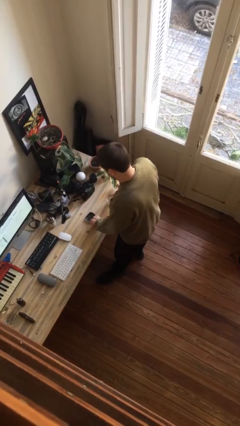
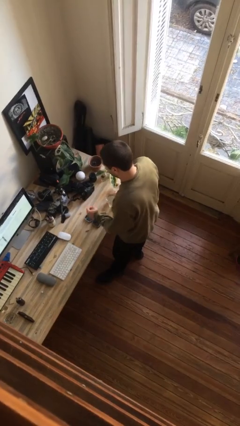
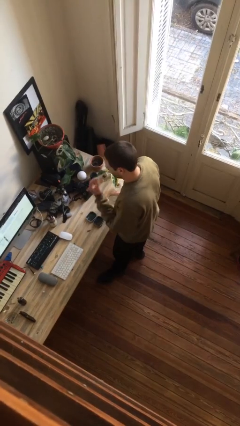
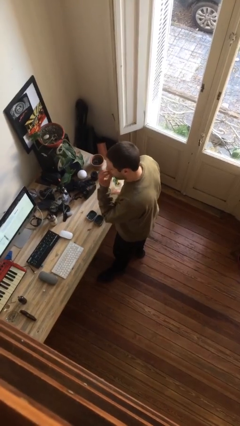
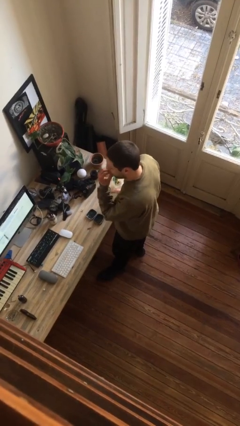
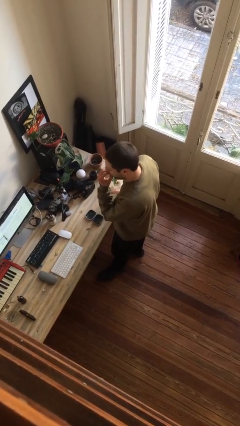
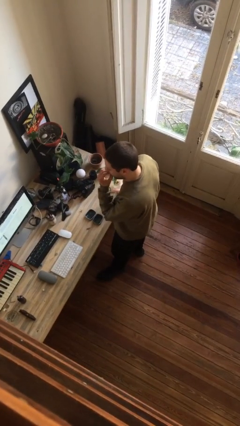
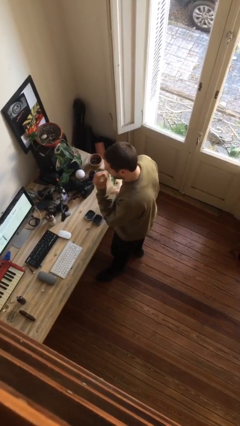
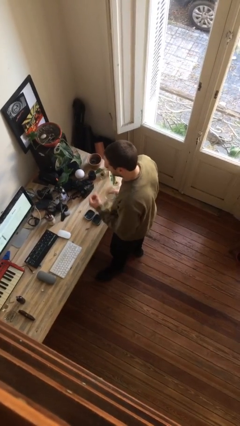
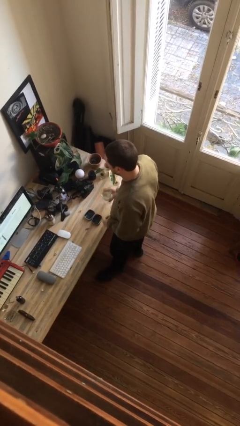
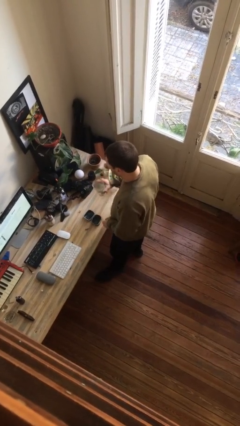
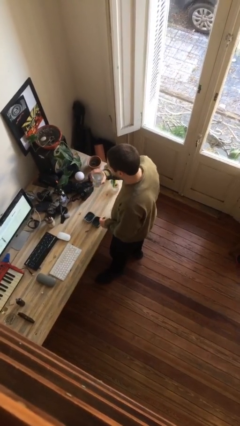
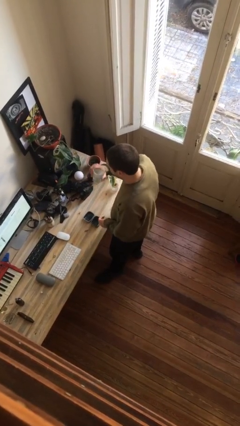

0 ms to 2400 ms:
person takes medicine pills

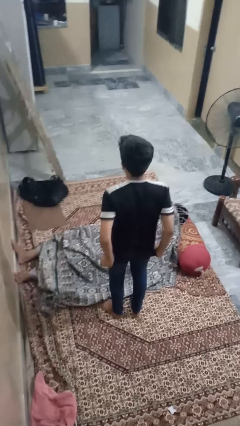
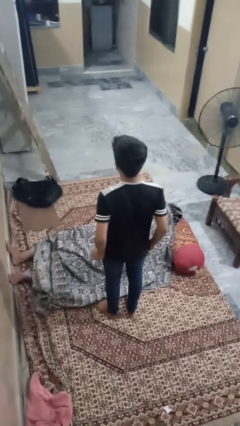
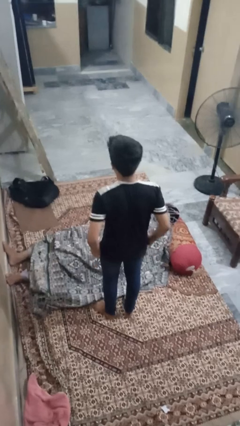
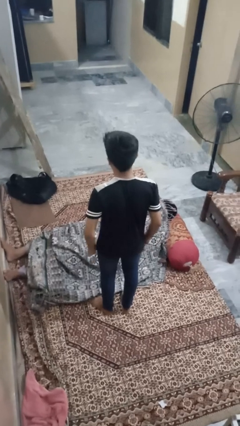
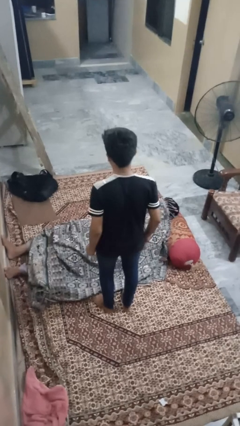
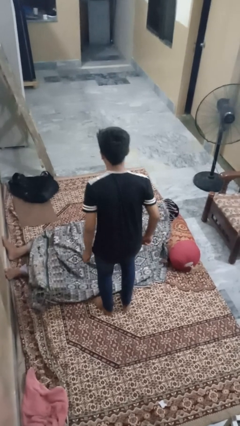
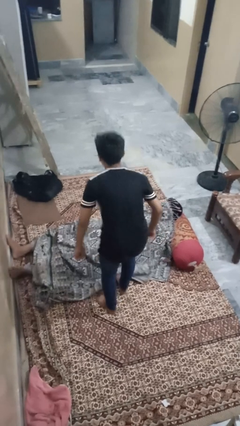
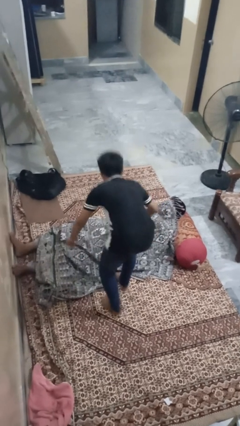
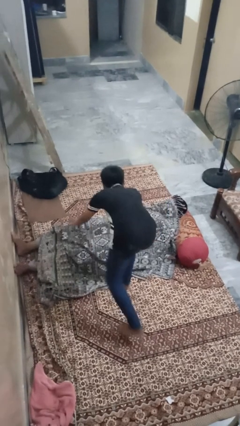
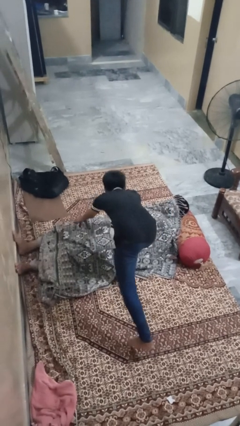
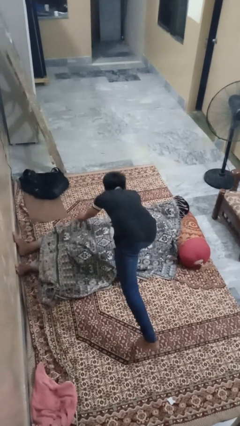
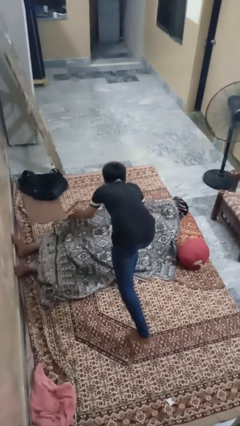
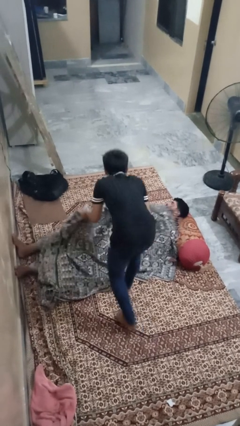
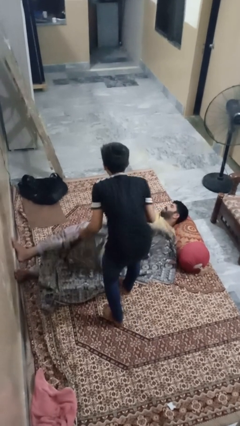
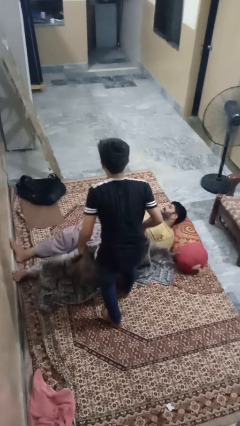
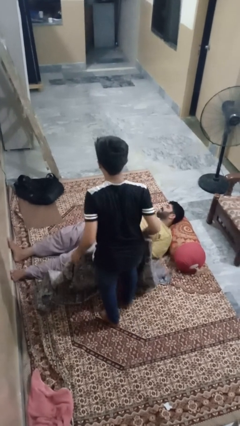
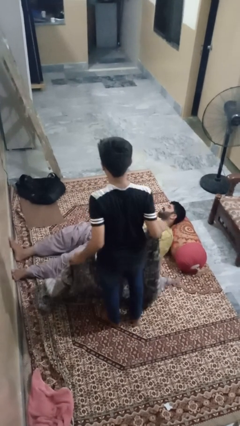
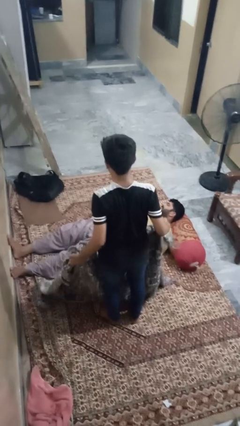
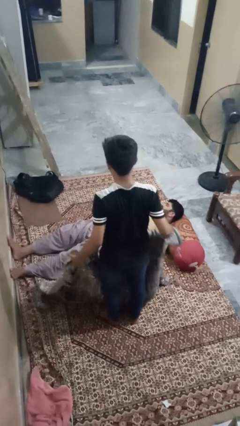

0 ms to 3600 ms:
person uncovers friend with blanket

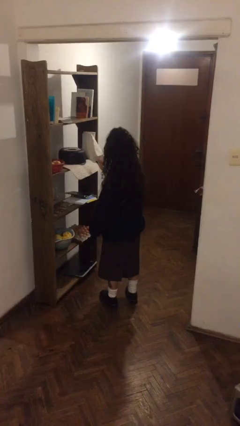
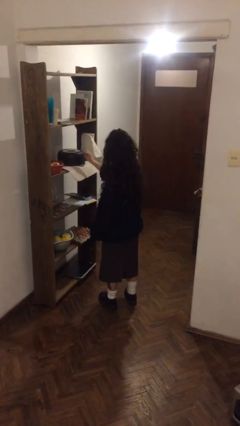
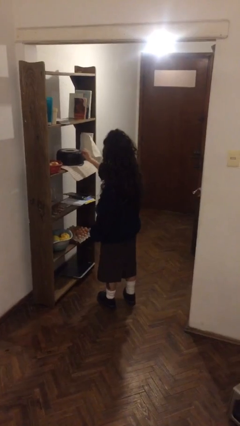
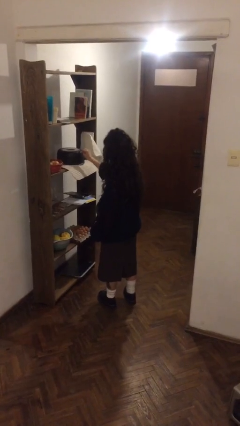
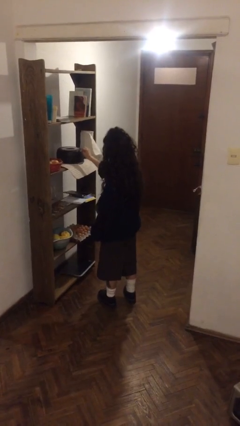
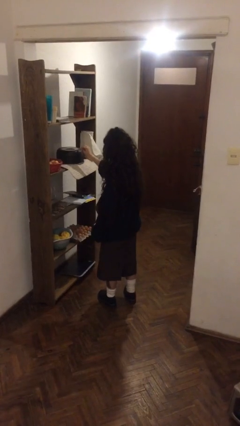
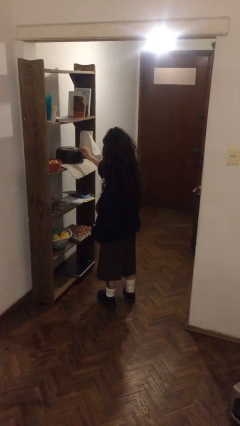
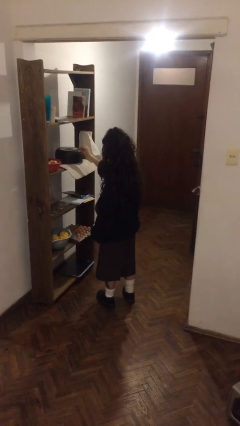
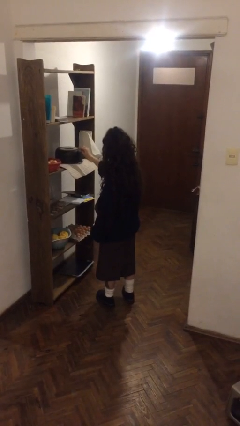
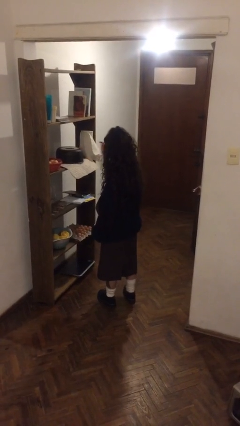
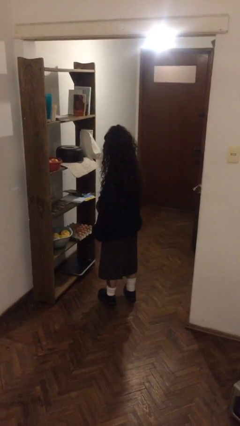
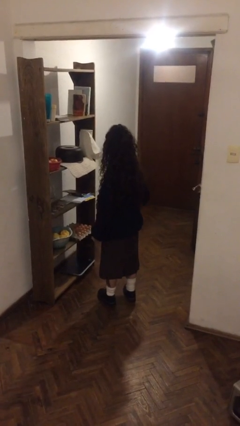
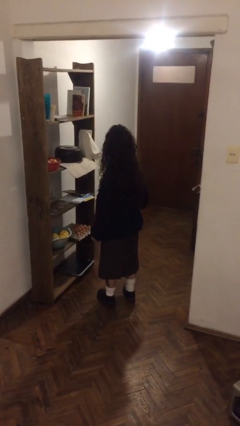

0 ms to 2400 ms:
person taps object with finger

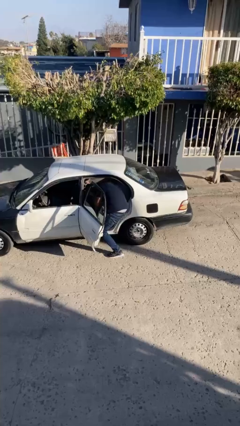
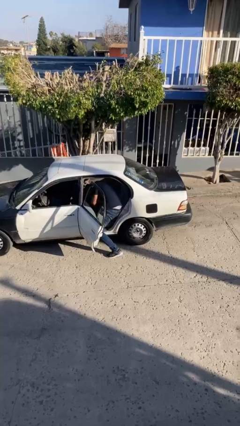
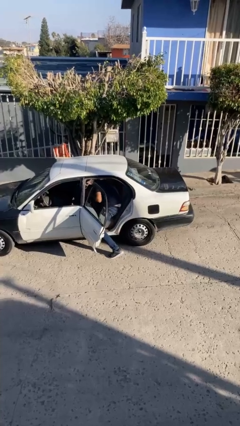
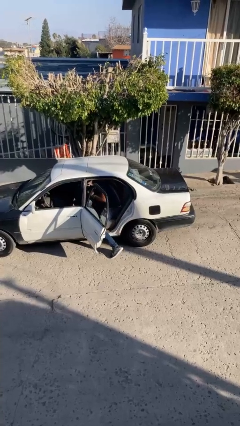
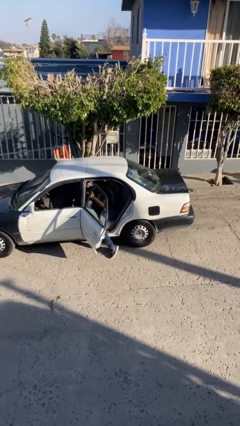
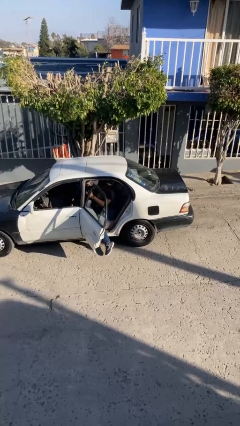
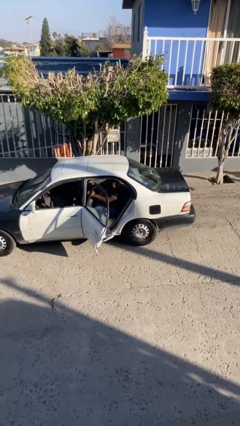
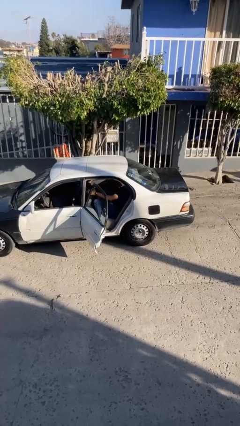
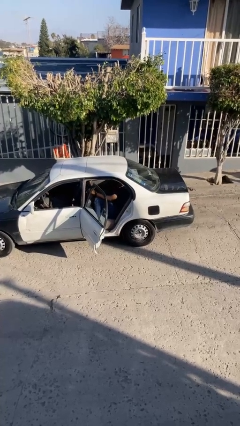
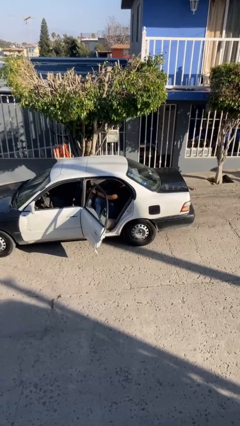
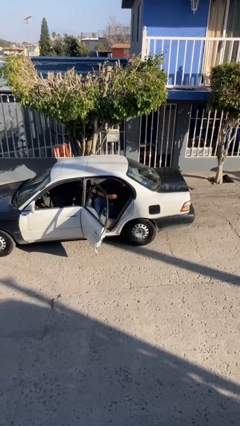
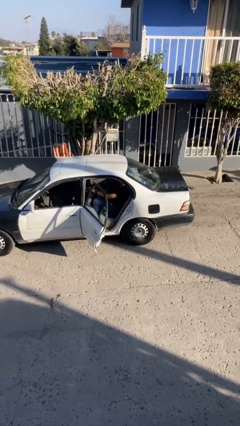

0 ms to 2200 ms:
person enters car

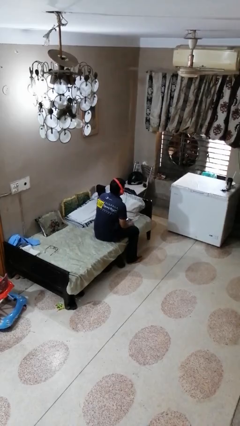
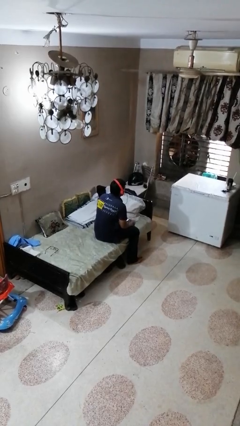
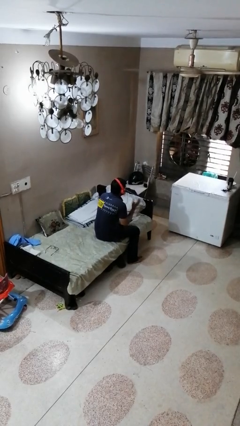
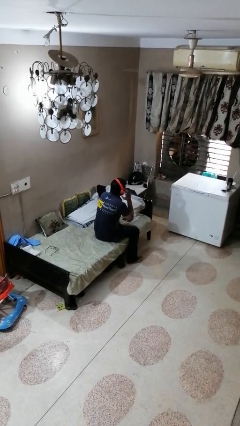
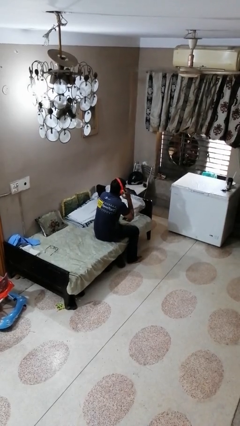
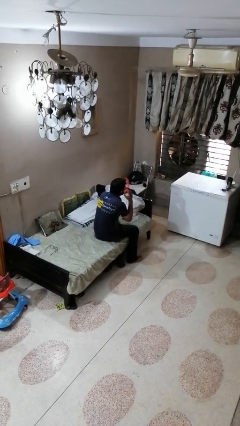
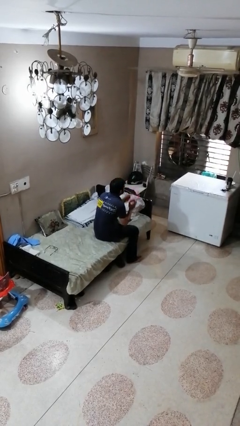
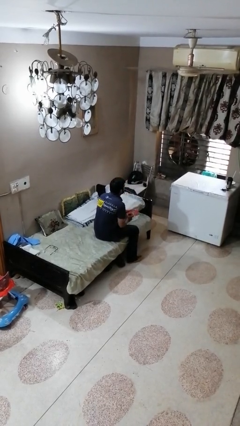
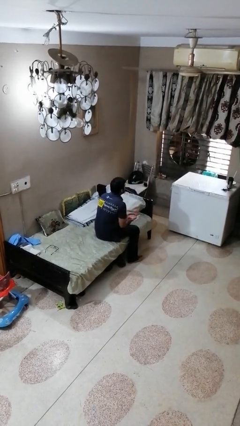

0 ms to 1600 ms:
person takes off headphones

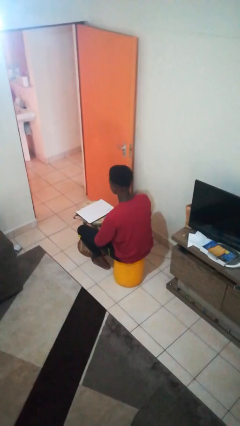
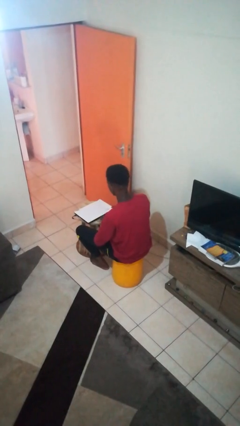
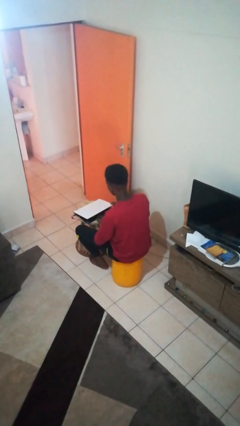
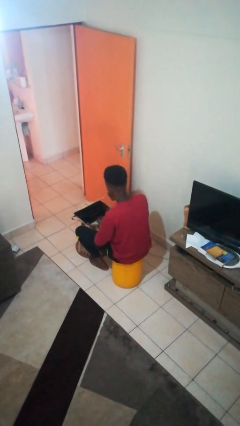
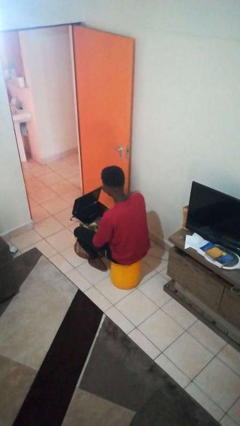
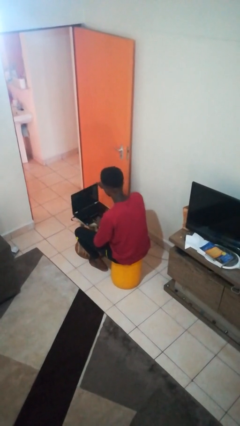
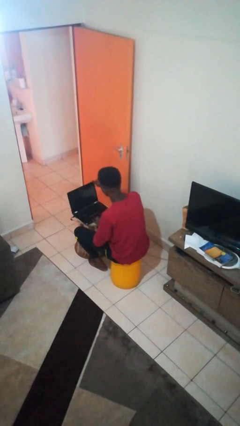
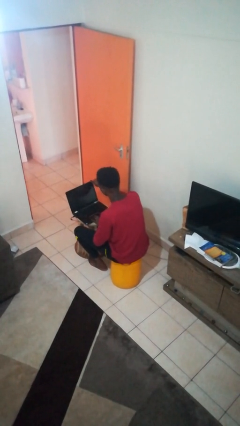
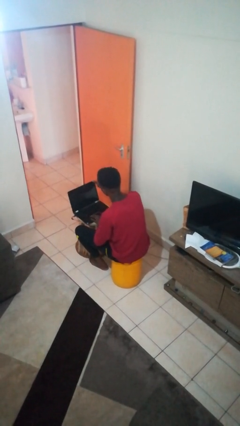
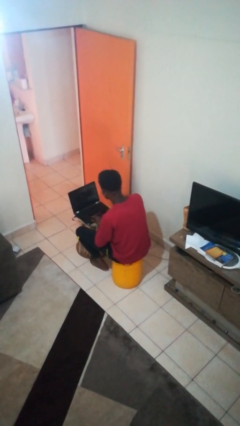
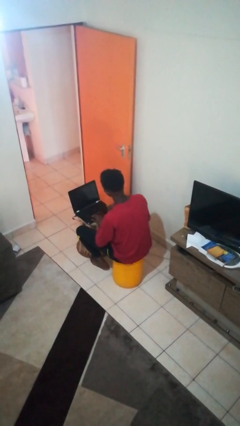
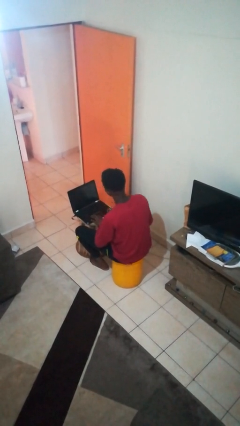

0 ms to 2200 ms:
person opens laptop

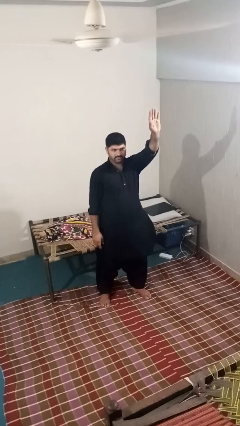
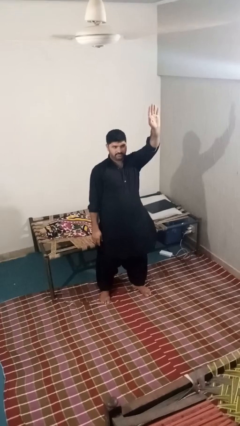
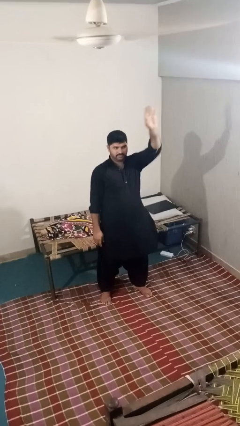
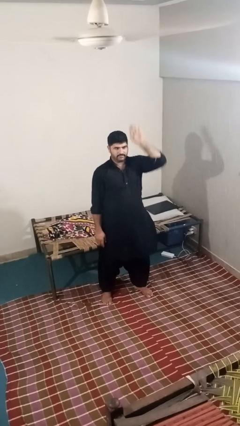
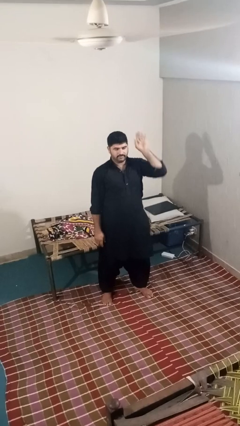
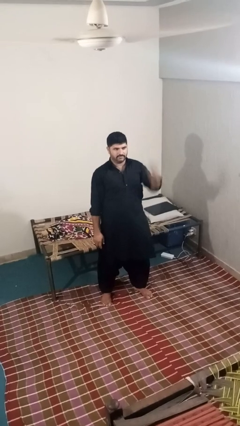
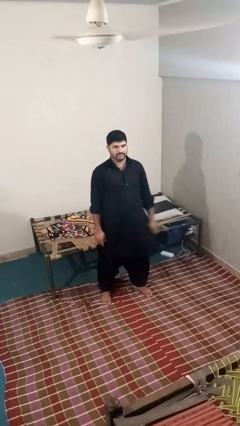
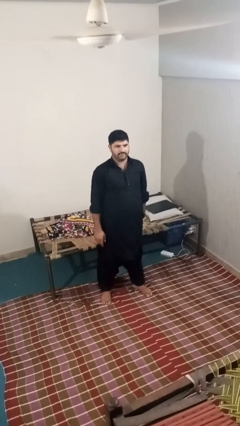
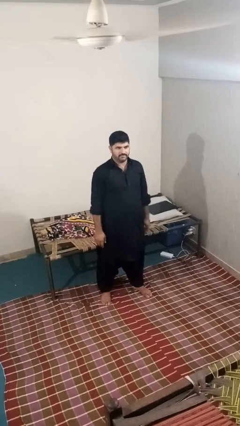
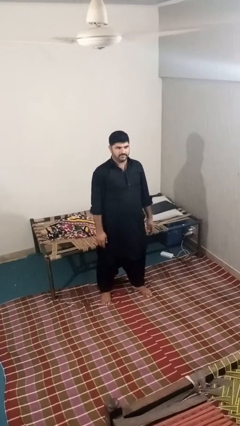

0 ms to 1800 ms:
person gestures lower hand

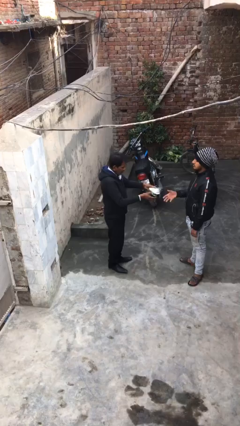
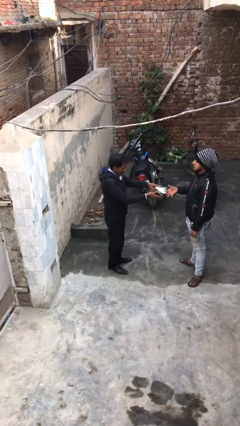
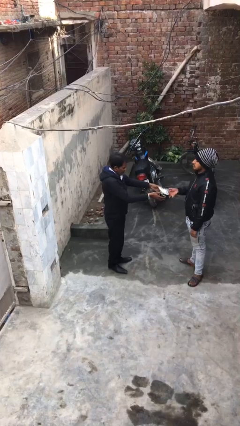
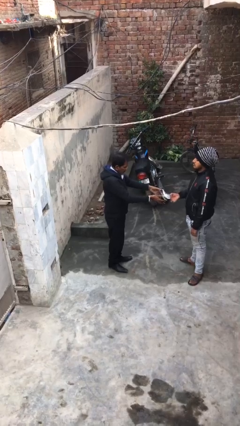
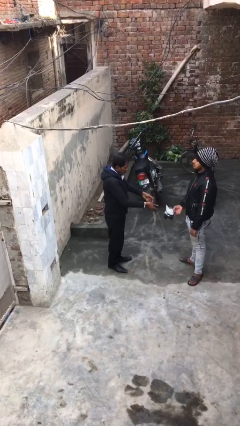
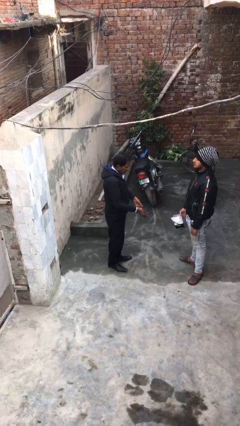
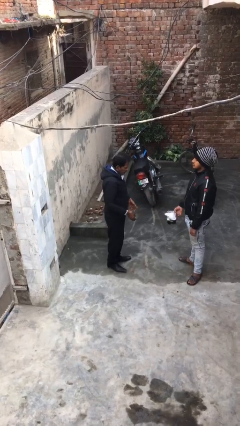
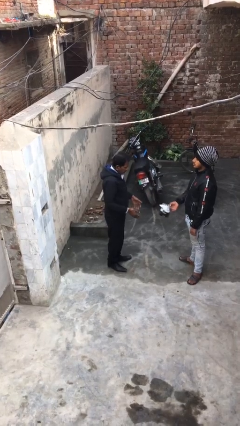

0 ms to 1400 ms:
person transfers object to person
